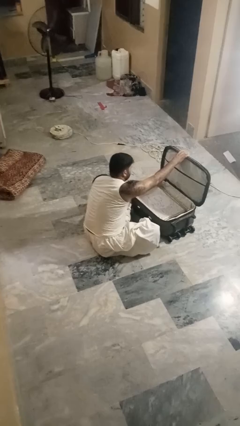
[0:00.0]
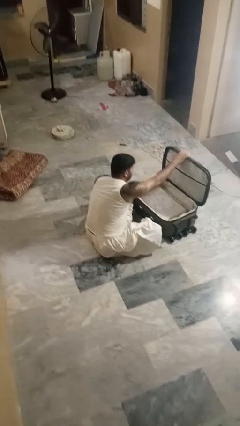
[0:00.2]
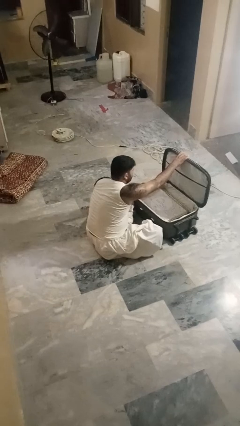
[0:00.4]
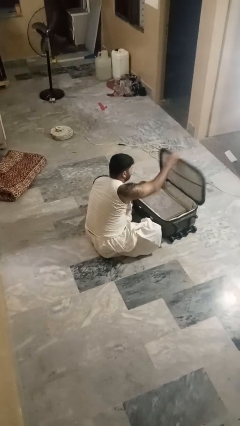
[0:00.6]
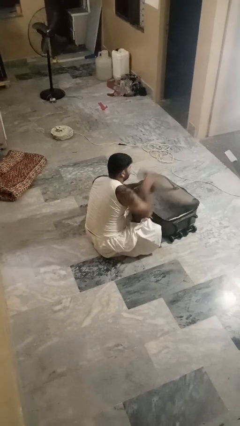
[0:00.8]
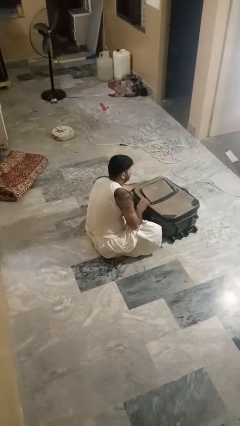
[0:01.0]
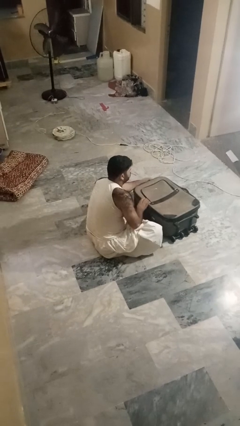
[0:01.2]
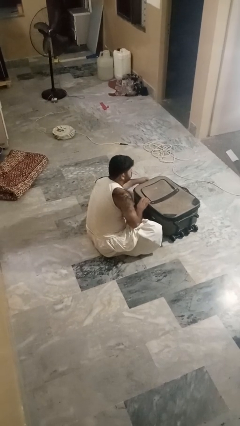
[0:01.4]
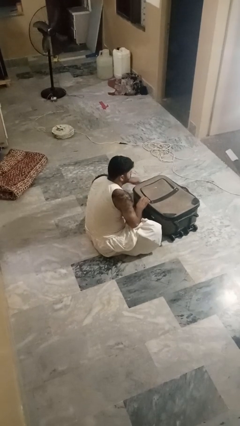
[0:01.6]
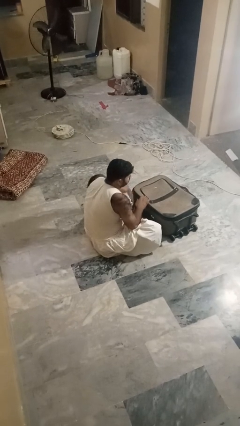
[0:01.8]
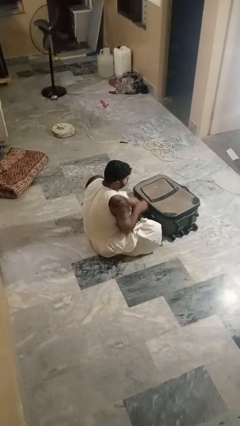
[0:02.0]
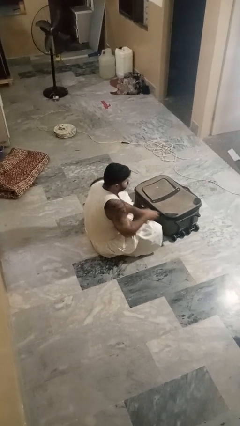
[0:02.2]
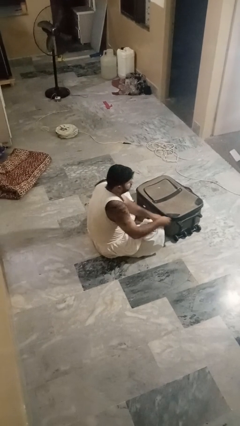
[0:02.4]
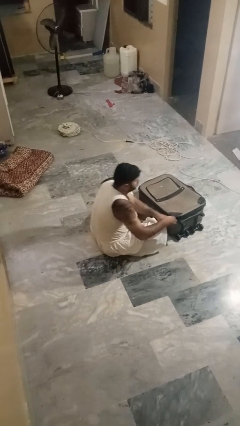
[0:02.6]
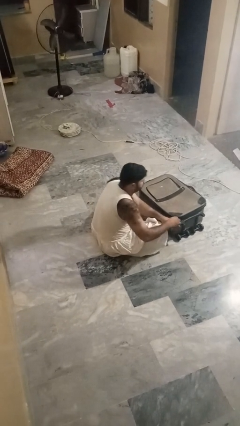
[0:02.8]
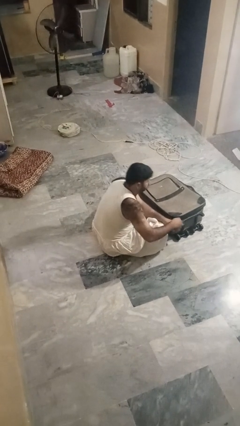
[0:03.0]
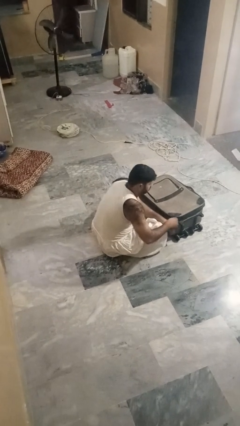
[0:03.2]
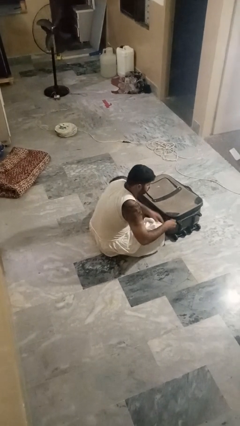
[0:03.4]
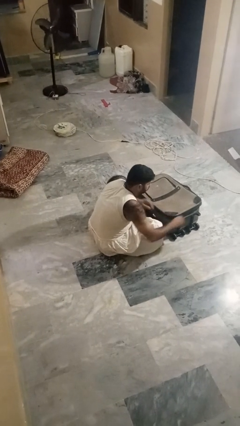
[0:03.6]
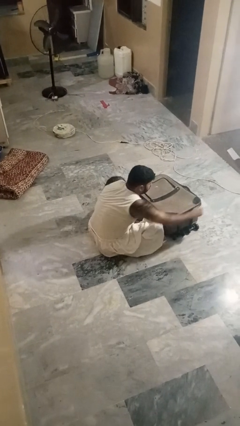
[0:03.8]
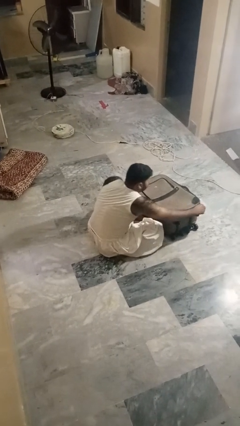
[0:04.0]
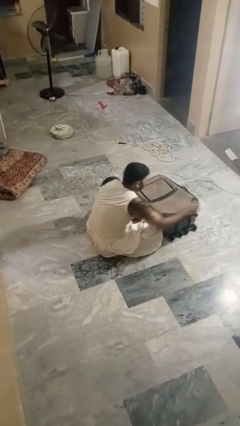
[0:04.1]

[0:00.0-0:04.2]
person closes suitcase

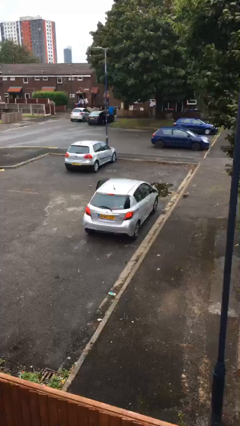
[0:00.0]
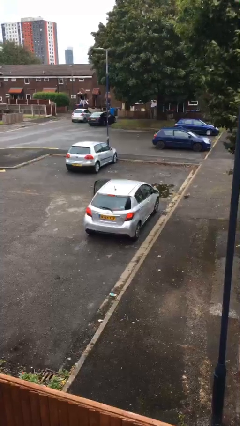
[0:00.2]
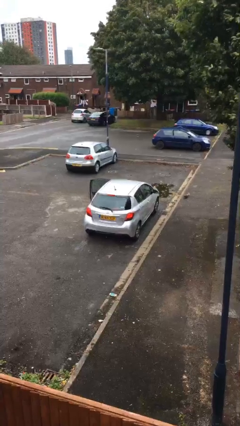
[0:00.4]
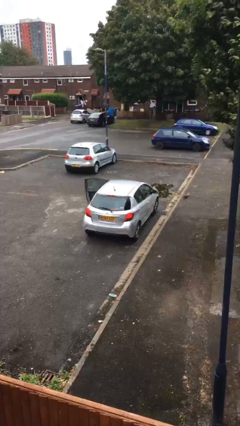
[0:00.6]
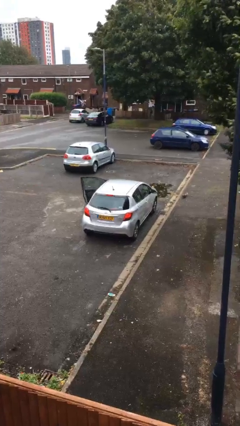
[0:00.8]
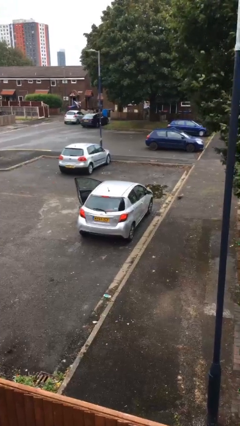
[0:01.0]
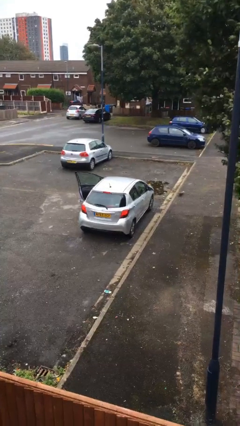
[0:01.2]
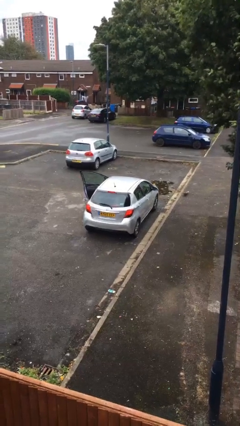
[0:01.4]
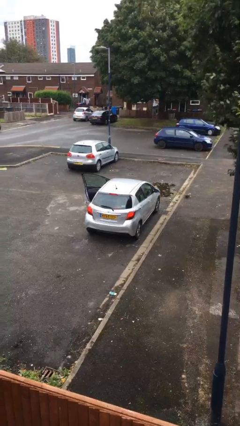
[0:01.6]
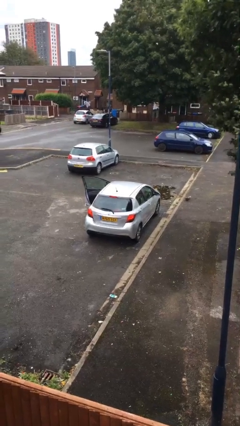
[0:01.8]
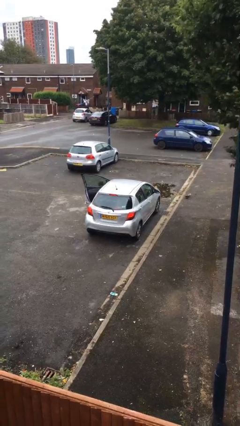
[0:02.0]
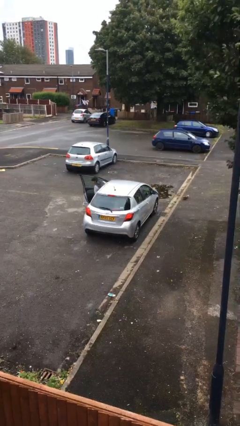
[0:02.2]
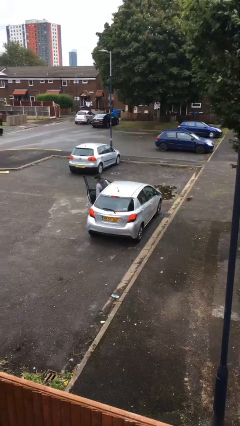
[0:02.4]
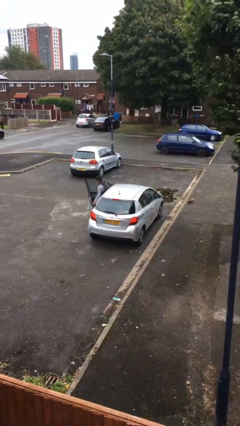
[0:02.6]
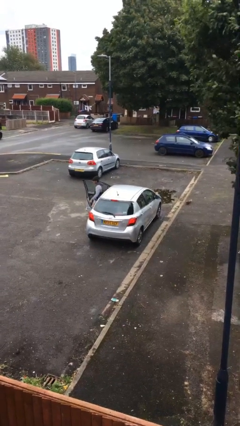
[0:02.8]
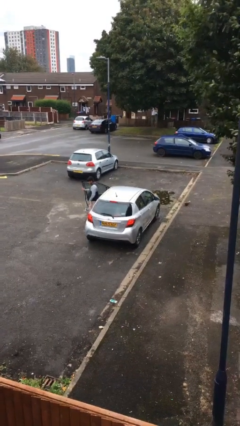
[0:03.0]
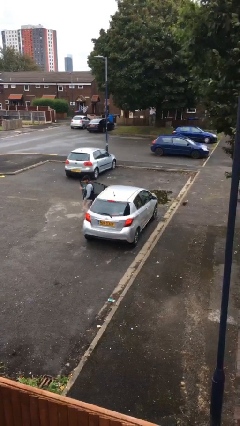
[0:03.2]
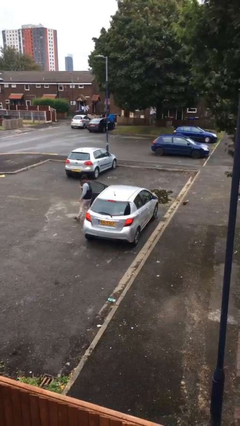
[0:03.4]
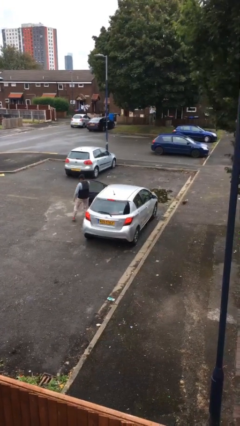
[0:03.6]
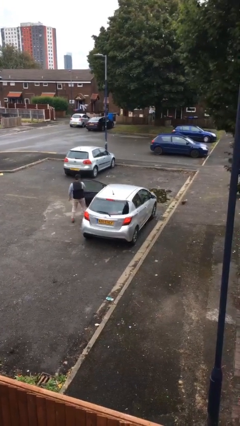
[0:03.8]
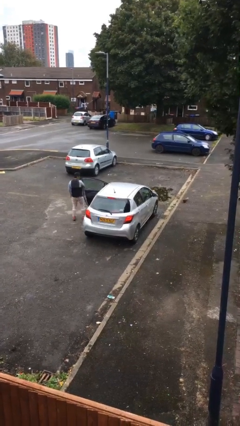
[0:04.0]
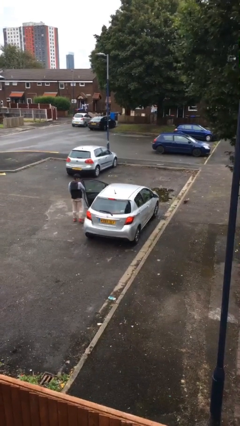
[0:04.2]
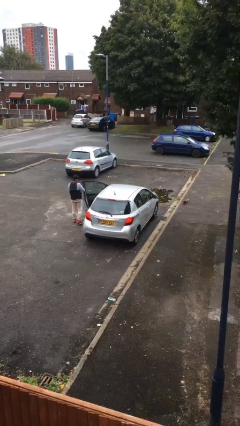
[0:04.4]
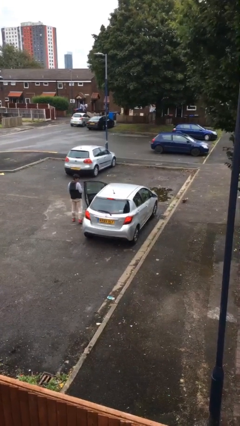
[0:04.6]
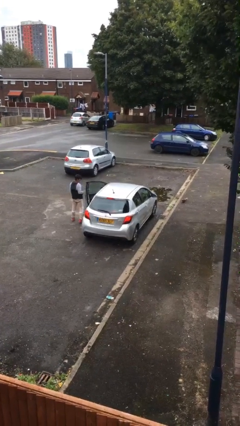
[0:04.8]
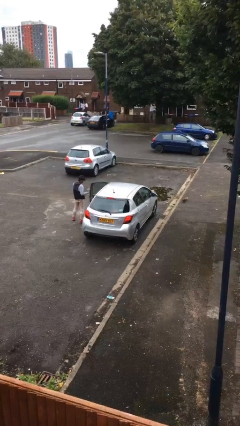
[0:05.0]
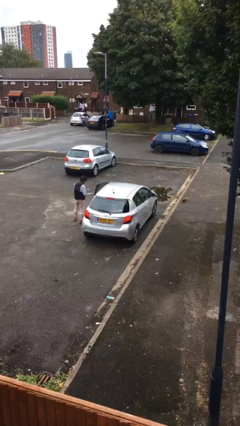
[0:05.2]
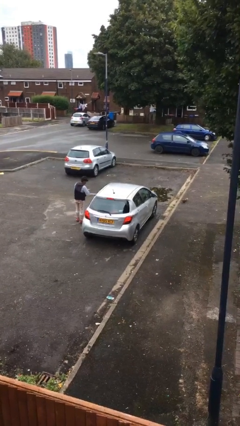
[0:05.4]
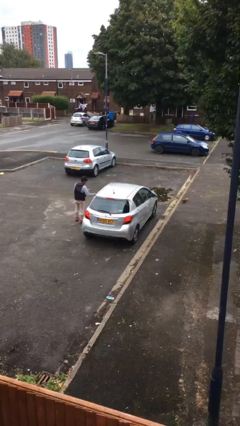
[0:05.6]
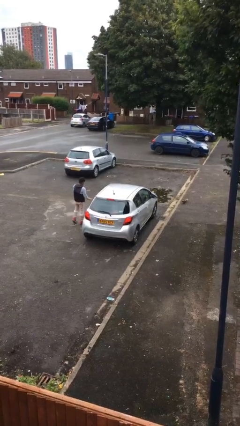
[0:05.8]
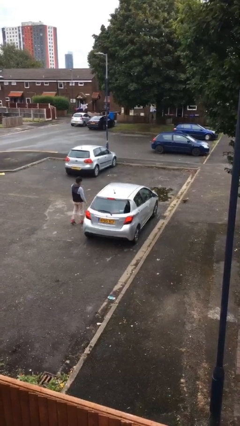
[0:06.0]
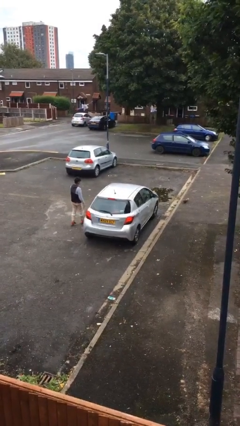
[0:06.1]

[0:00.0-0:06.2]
car drops off person

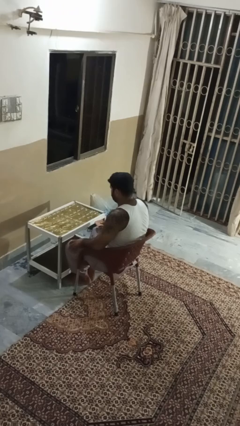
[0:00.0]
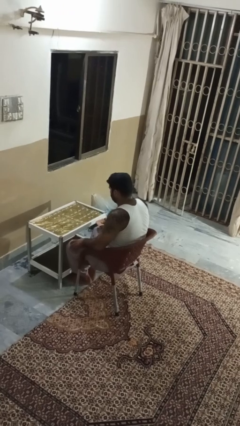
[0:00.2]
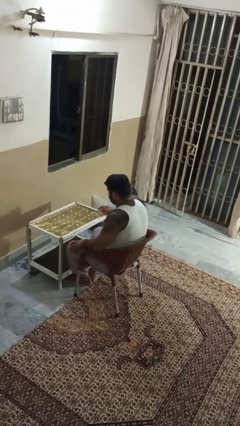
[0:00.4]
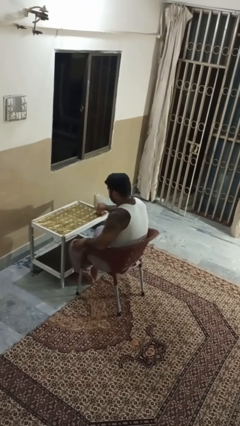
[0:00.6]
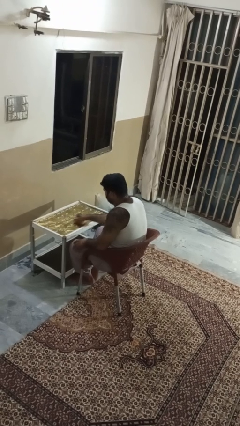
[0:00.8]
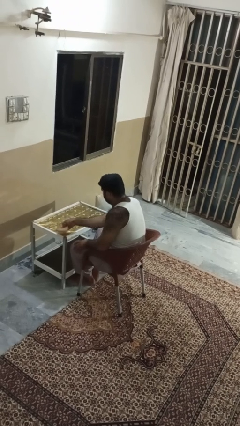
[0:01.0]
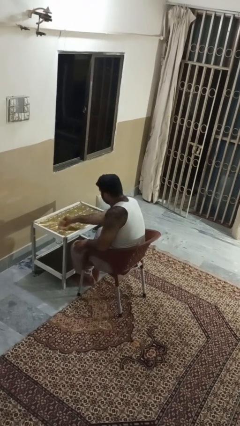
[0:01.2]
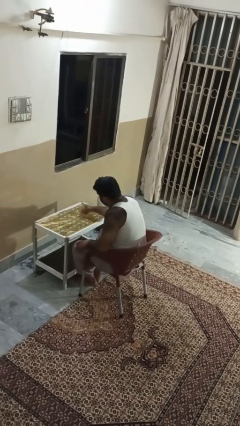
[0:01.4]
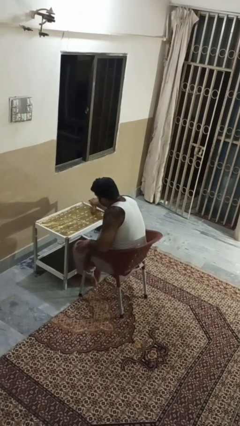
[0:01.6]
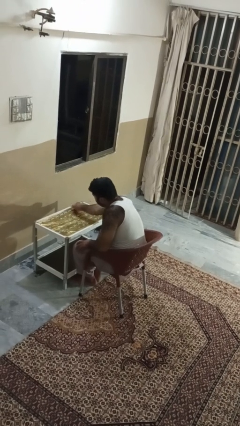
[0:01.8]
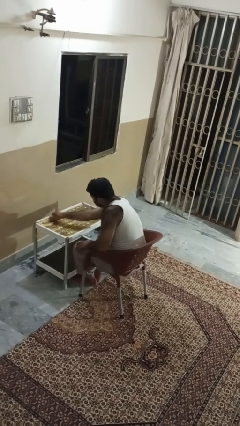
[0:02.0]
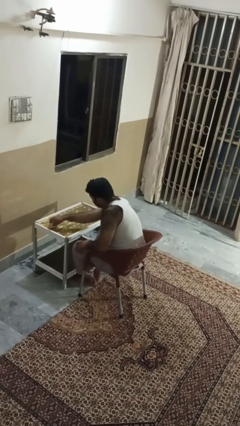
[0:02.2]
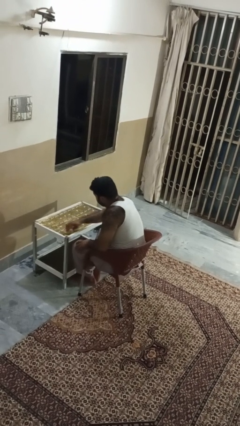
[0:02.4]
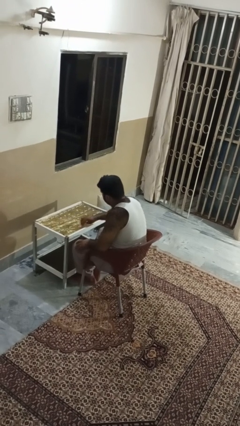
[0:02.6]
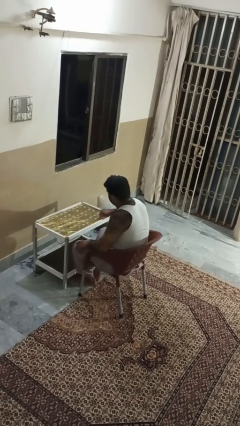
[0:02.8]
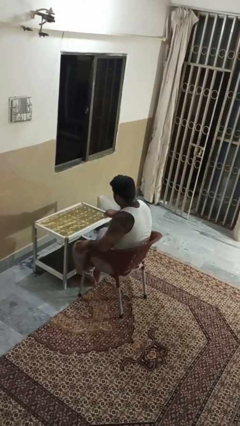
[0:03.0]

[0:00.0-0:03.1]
person cleans table with rag

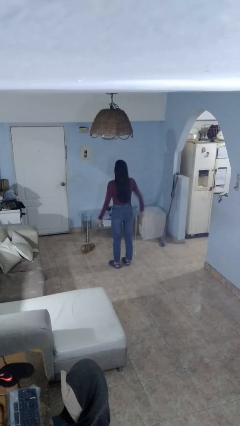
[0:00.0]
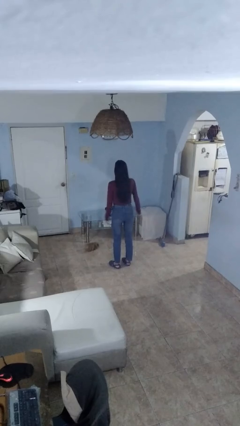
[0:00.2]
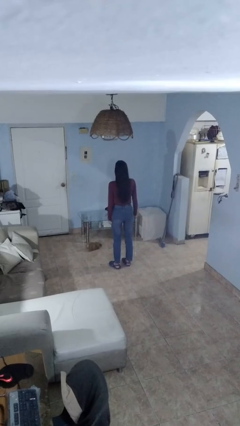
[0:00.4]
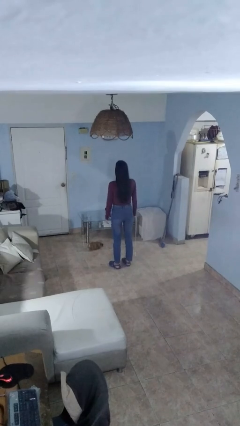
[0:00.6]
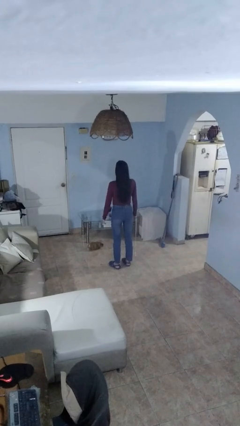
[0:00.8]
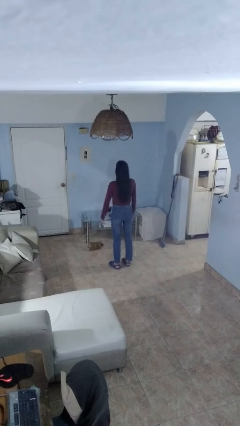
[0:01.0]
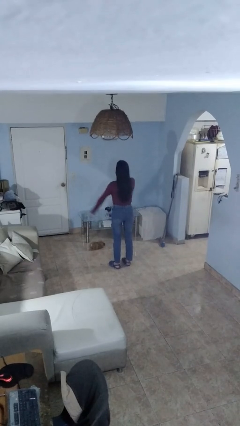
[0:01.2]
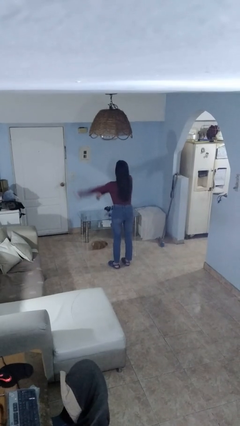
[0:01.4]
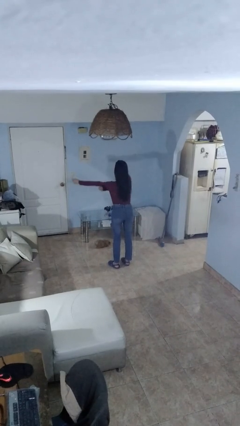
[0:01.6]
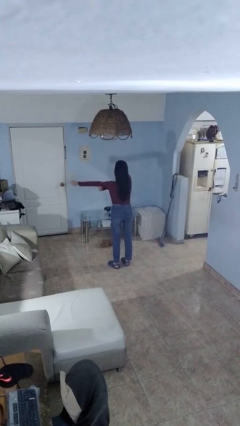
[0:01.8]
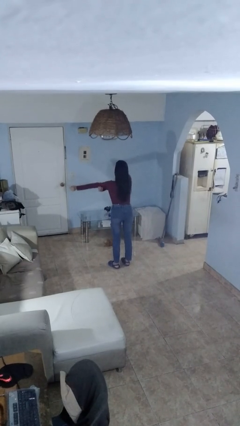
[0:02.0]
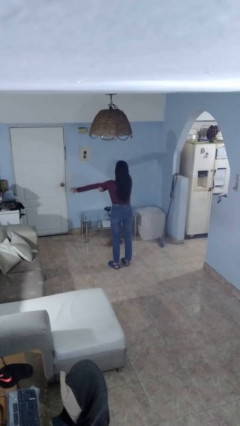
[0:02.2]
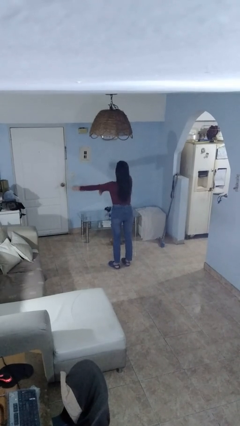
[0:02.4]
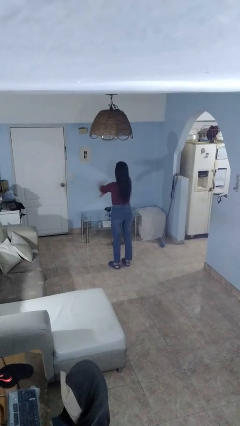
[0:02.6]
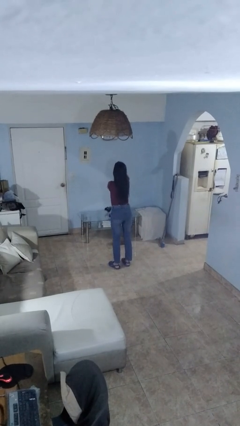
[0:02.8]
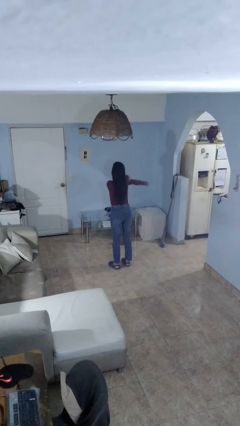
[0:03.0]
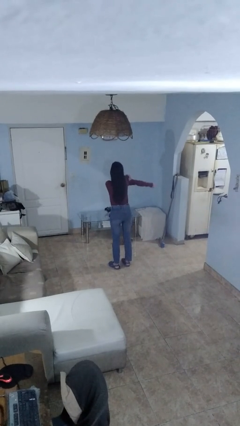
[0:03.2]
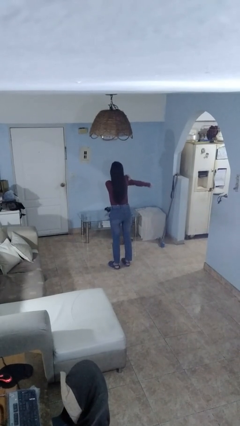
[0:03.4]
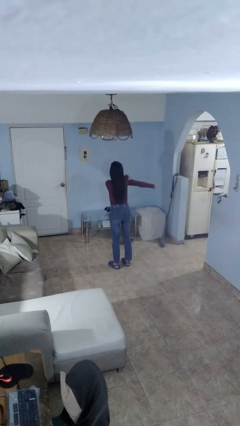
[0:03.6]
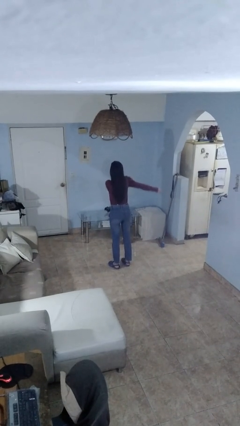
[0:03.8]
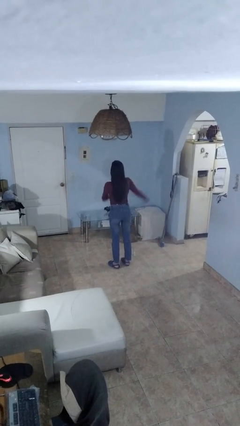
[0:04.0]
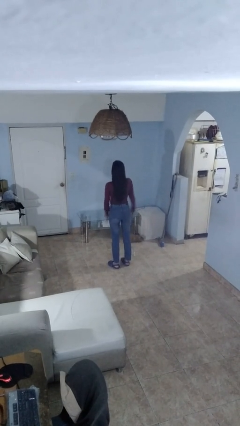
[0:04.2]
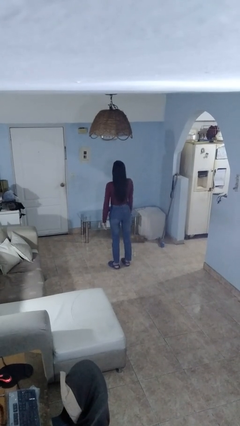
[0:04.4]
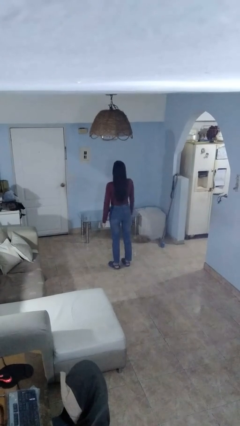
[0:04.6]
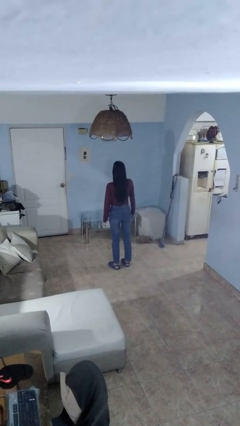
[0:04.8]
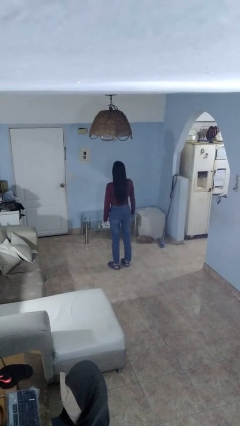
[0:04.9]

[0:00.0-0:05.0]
person stretches arms to side
